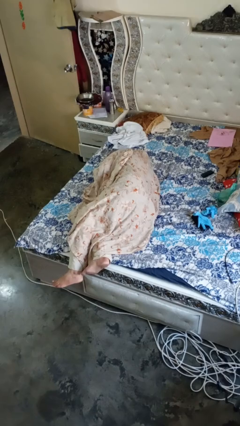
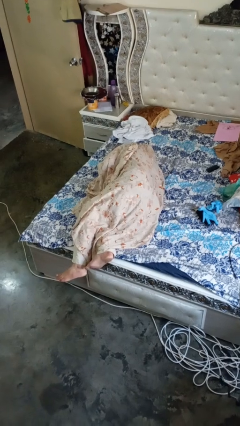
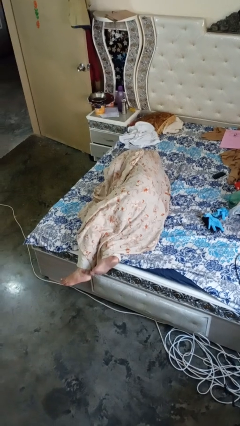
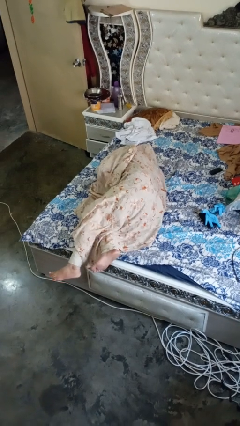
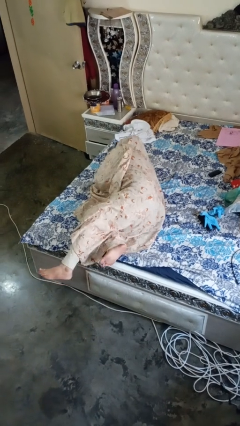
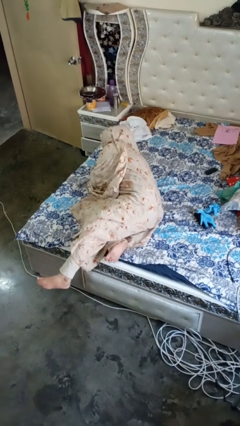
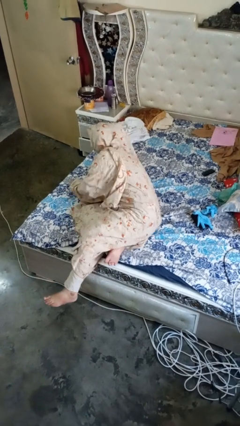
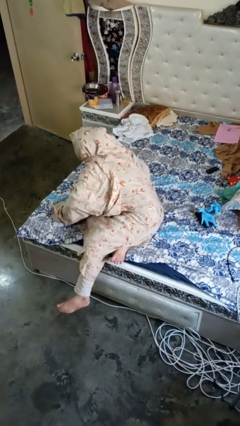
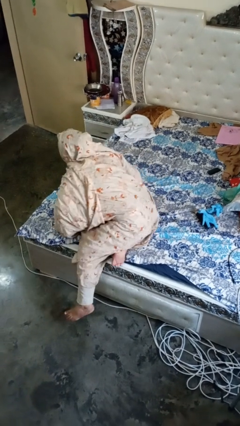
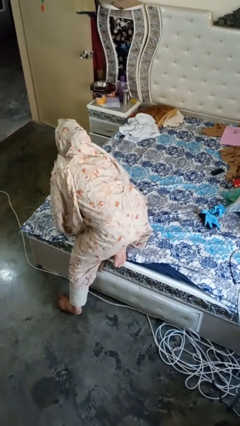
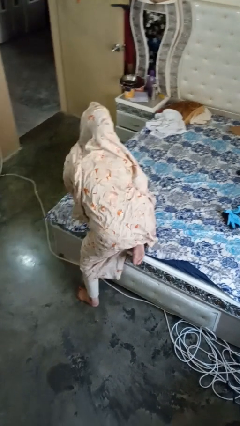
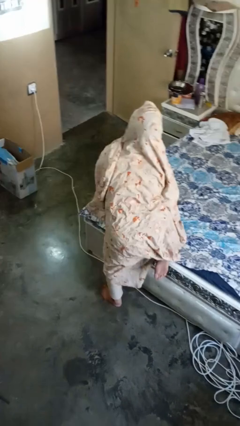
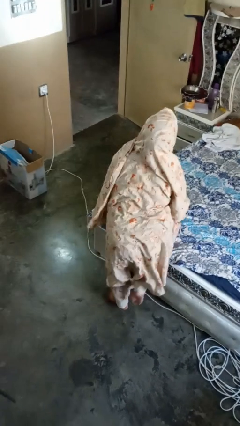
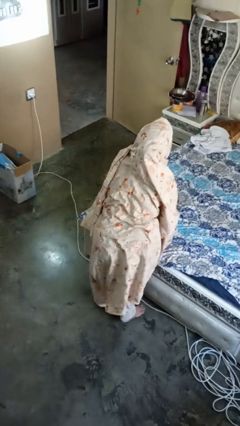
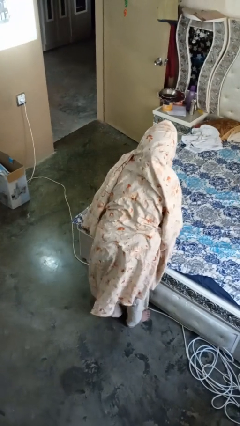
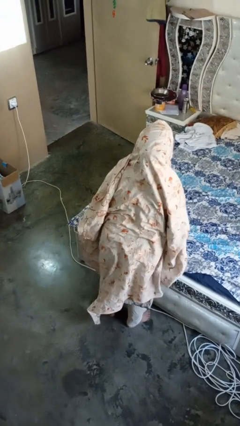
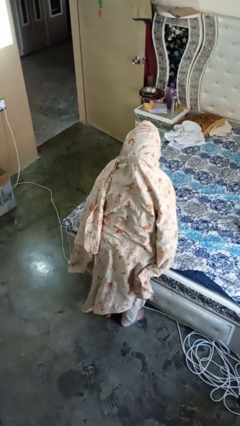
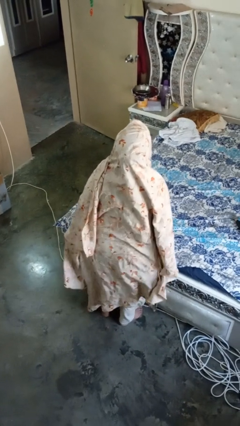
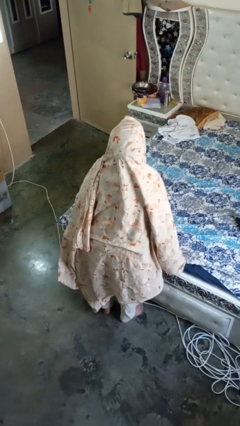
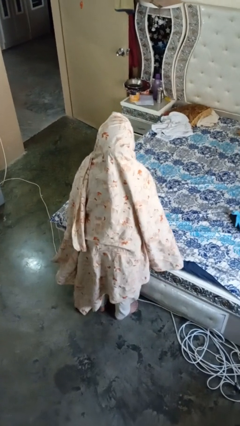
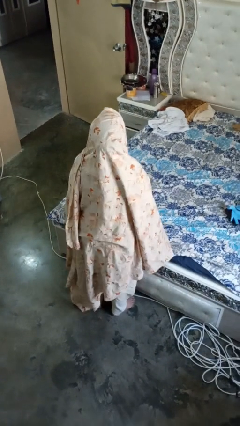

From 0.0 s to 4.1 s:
person stands up

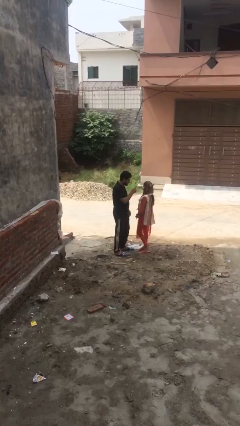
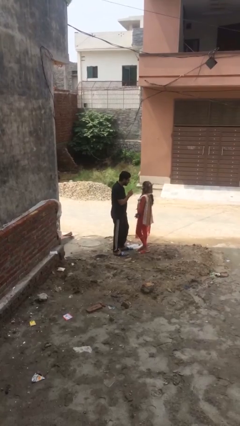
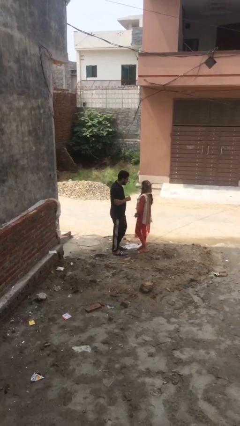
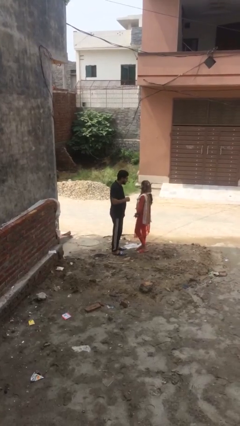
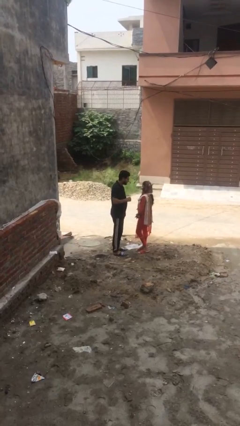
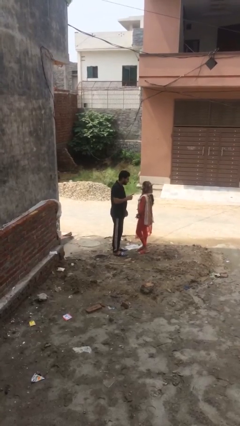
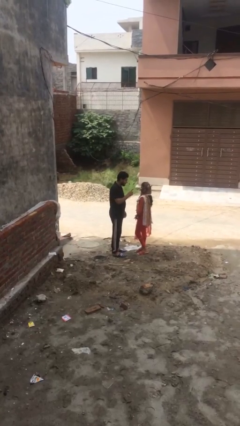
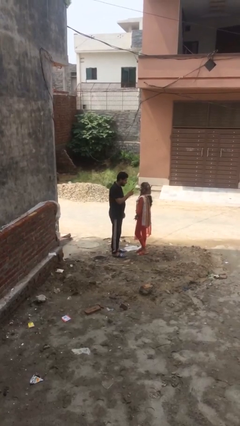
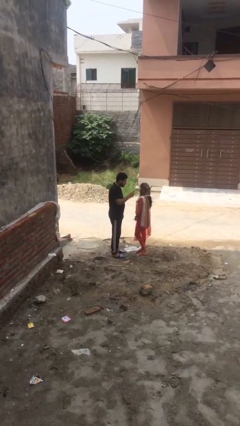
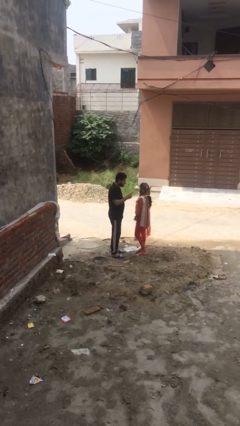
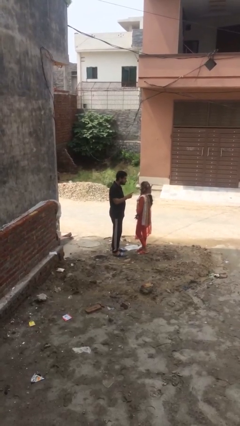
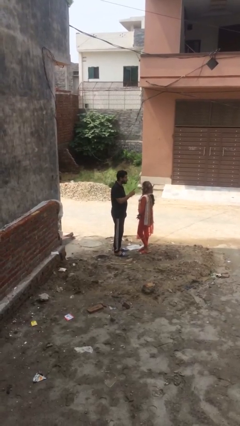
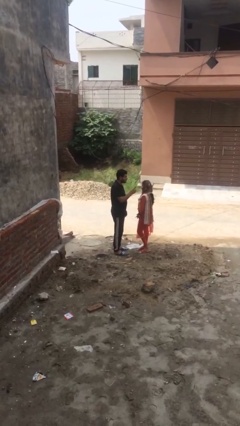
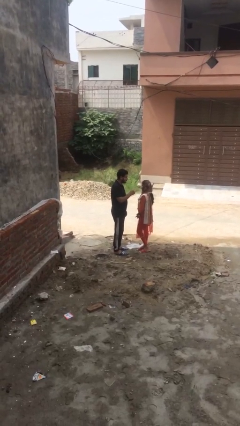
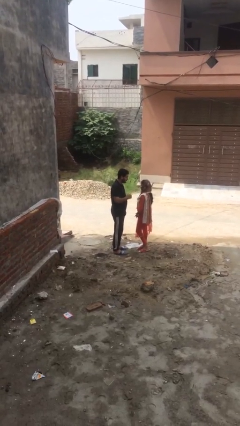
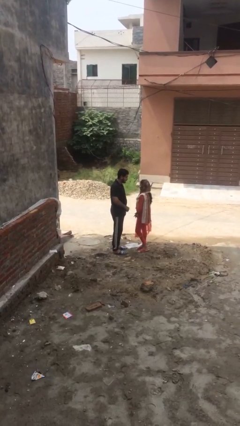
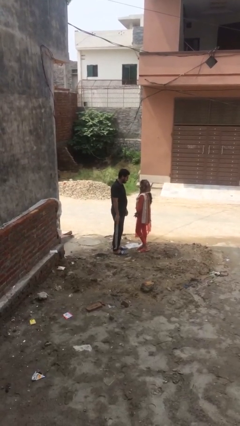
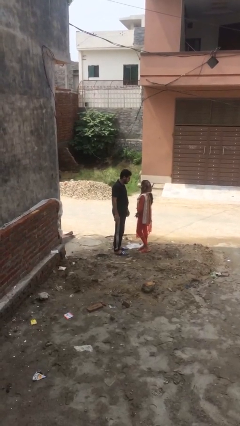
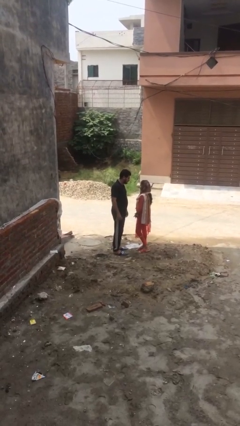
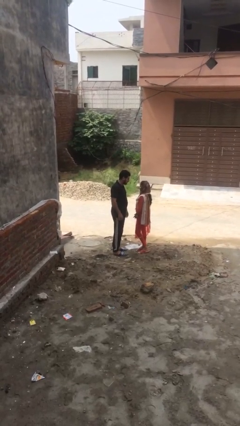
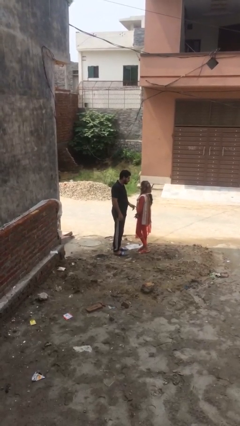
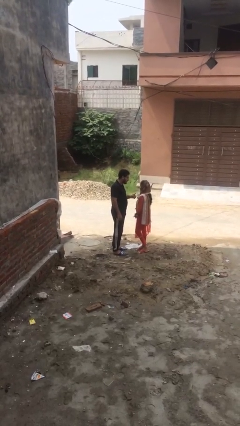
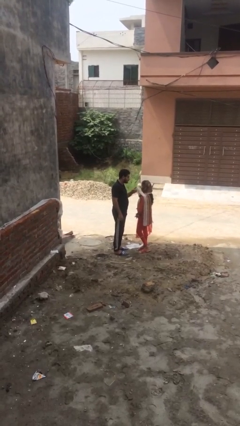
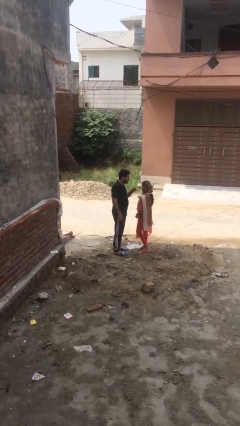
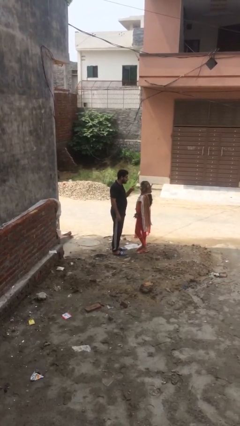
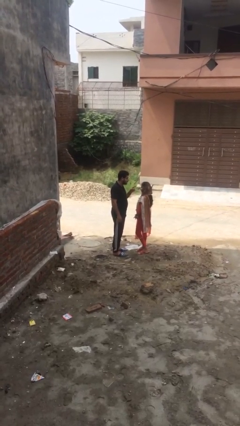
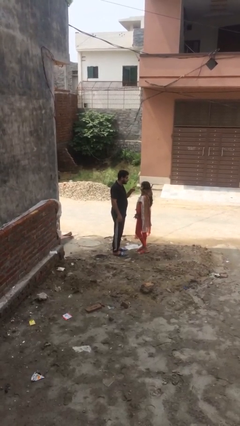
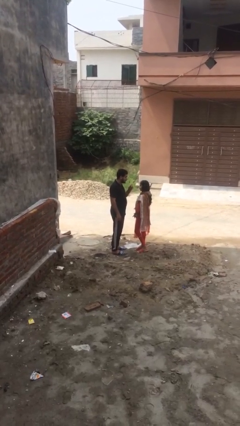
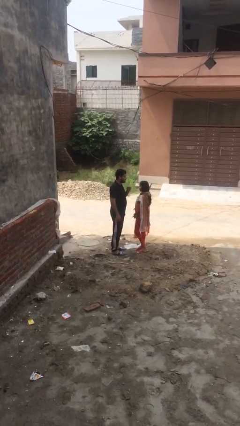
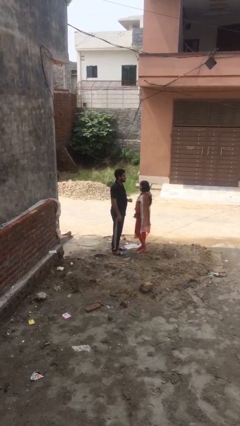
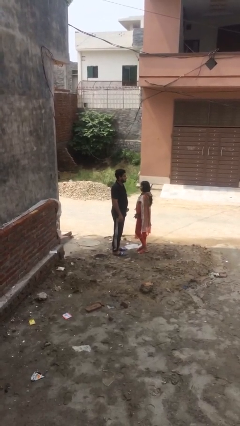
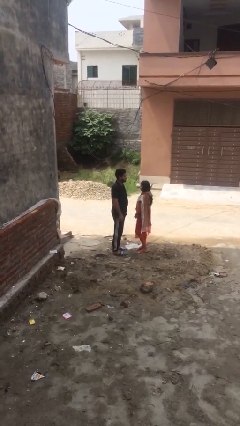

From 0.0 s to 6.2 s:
person talks to person

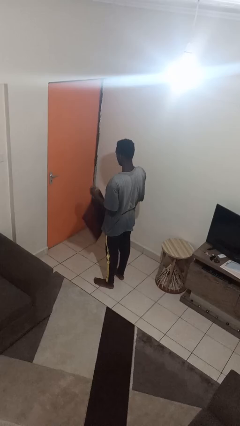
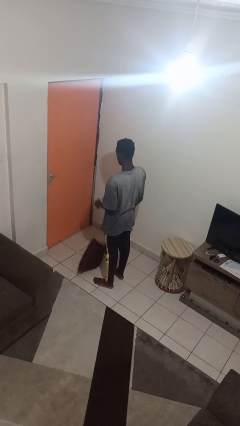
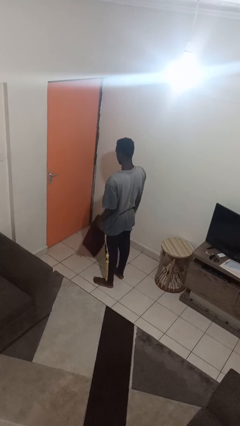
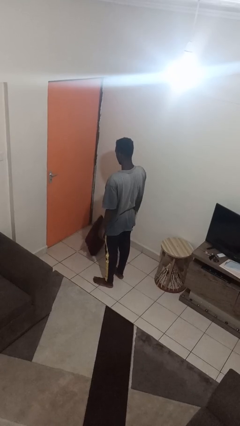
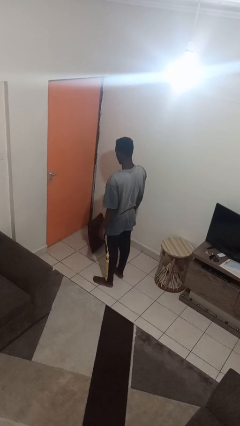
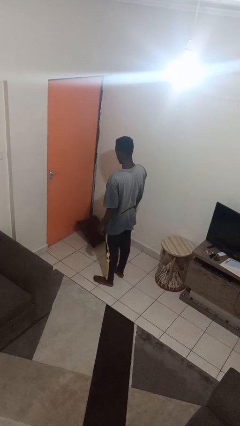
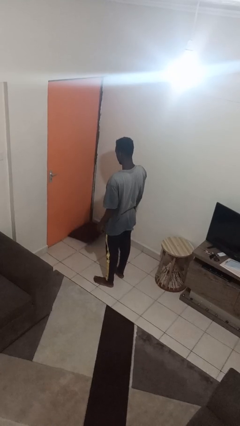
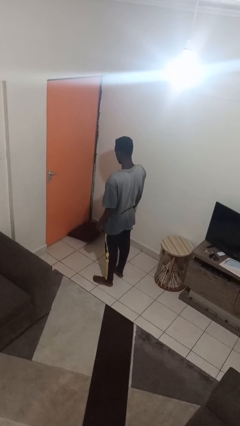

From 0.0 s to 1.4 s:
person picks up object from floor

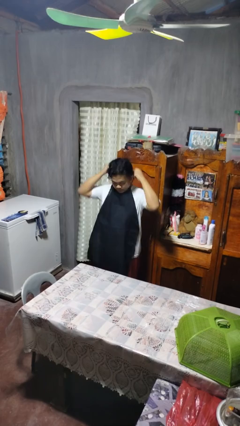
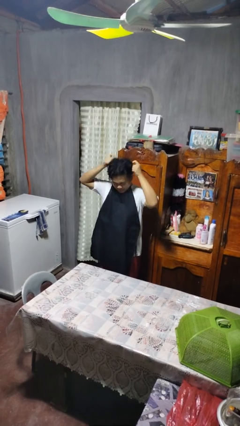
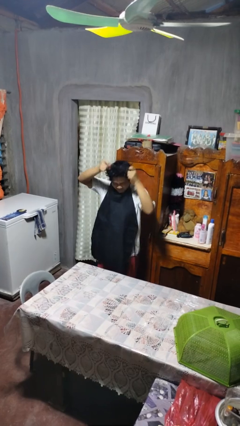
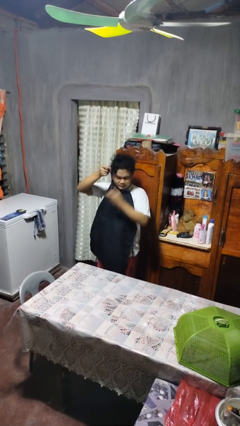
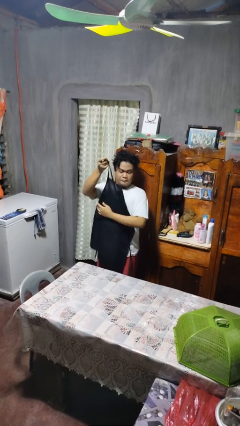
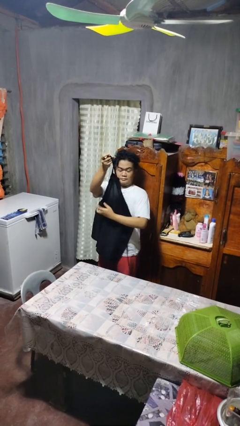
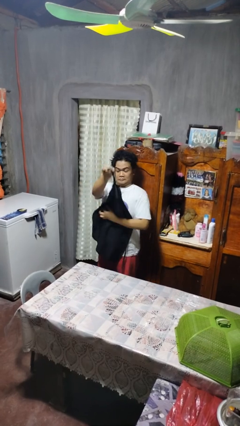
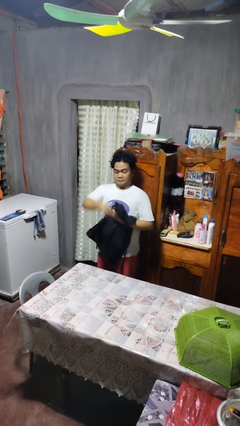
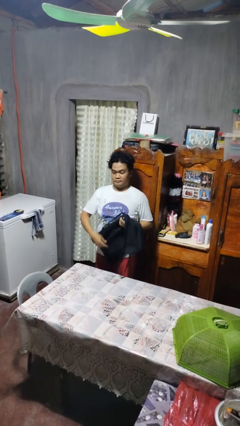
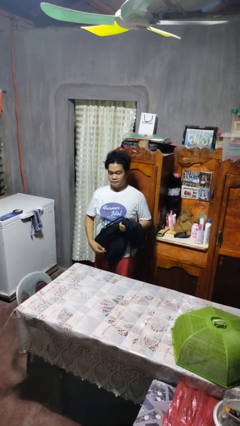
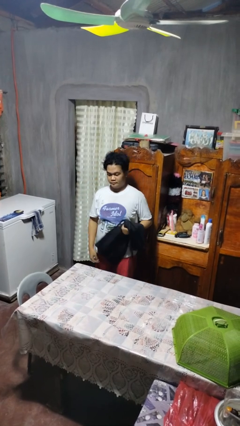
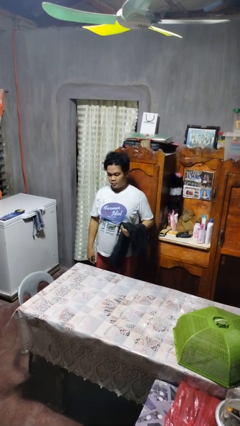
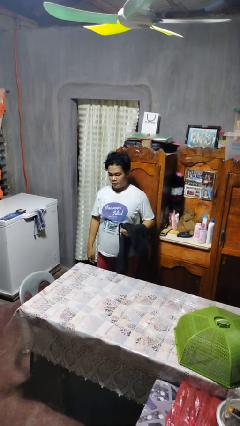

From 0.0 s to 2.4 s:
person takes off apron

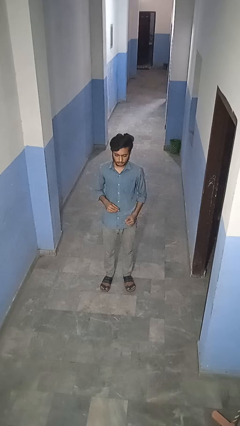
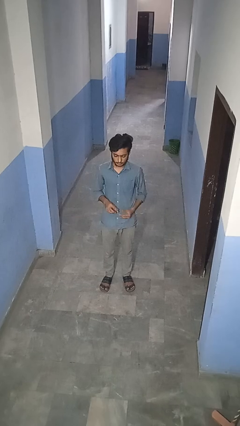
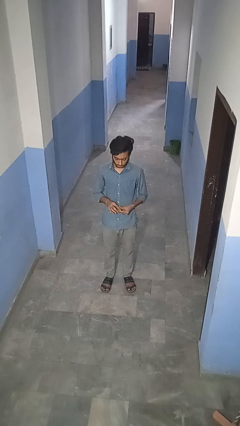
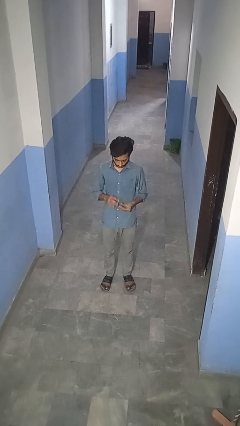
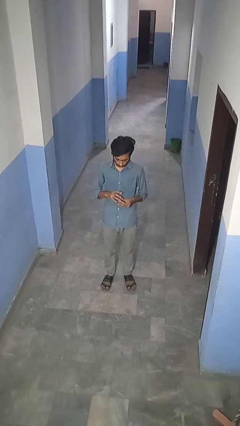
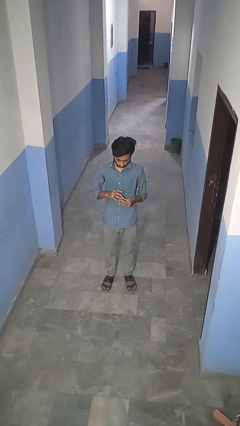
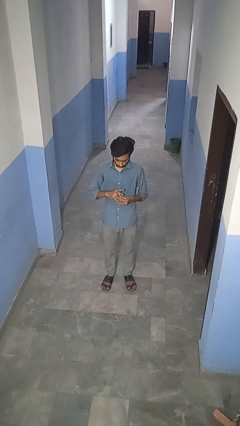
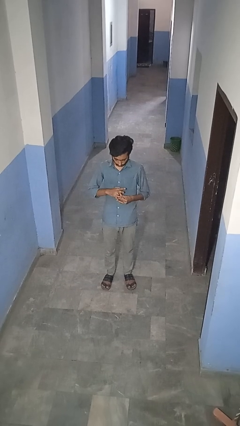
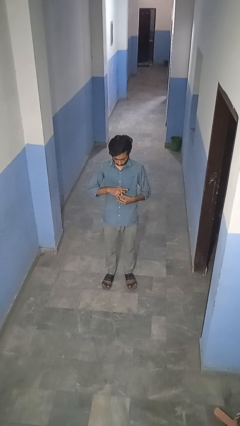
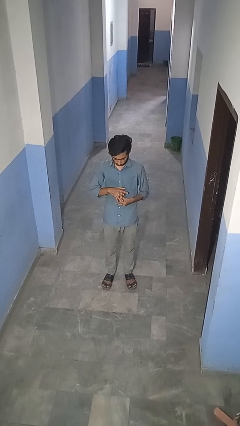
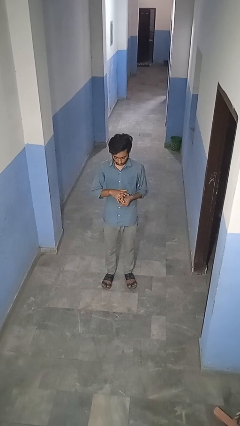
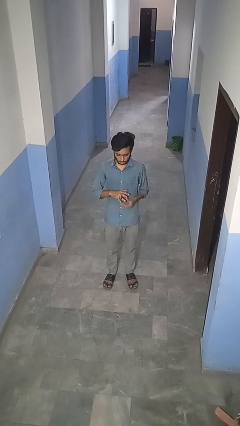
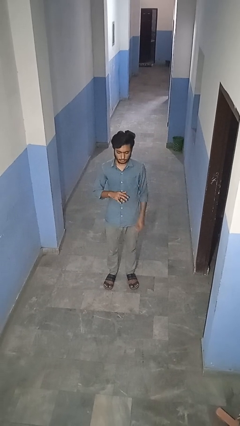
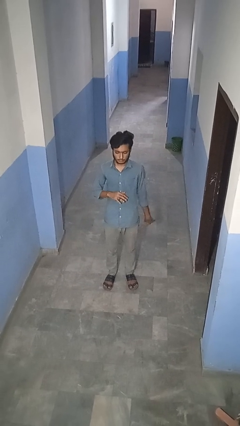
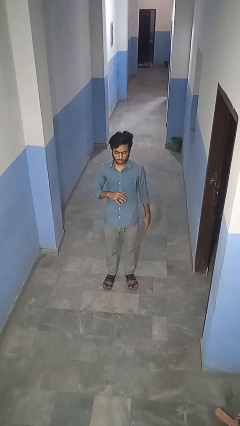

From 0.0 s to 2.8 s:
person puts on ring

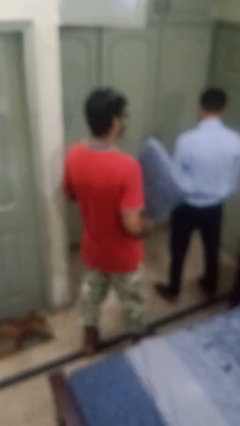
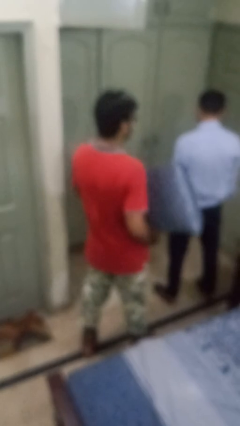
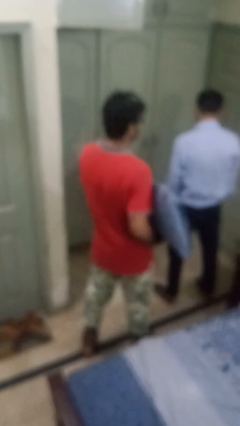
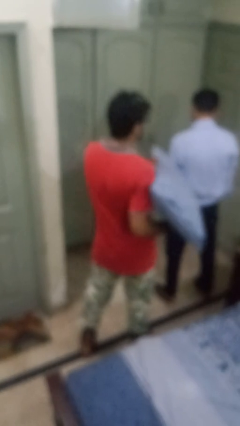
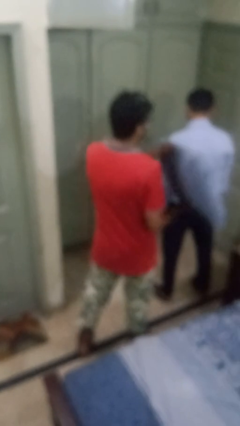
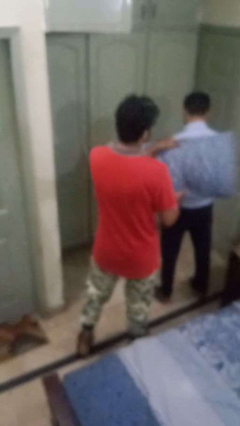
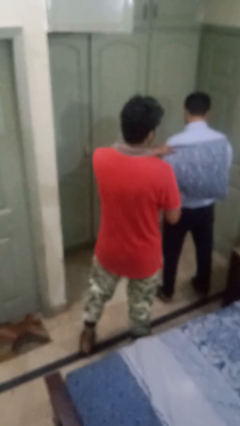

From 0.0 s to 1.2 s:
person hits person with pillow
